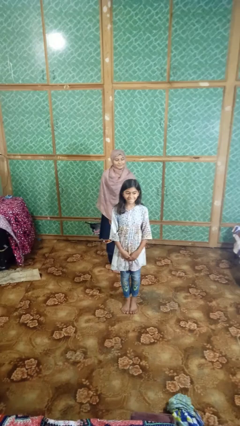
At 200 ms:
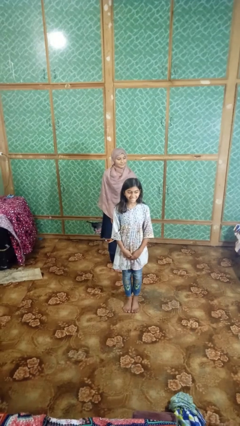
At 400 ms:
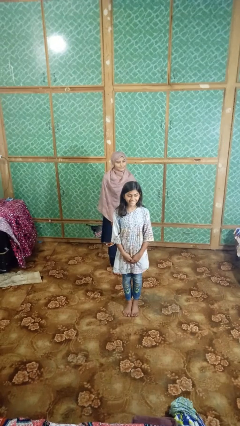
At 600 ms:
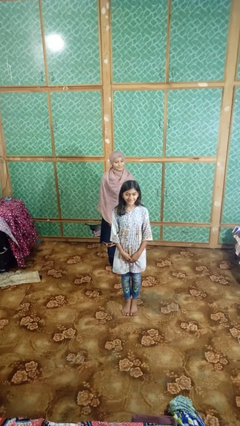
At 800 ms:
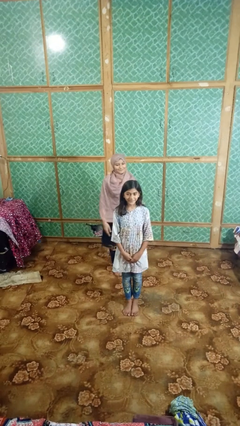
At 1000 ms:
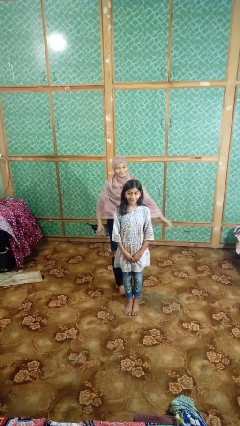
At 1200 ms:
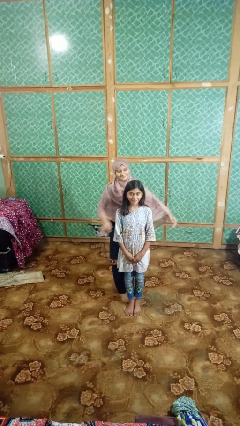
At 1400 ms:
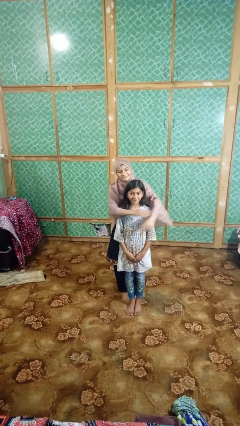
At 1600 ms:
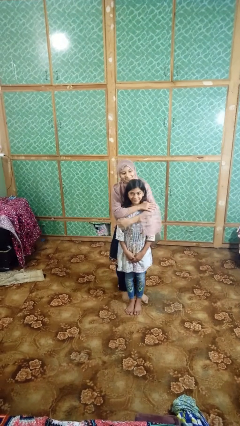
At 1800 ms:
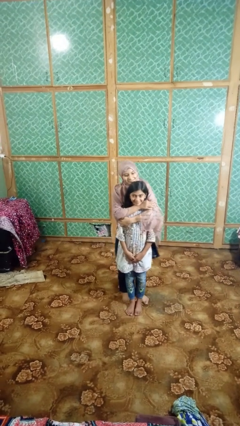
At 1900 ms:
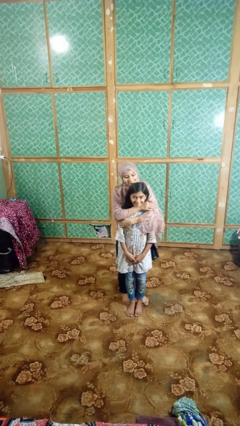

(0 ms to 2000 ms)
person hugs person from behind

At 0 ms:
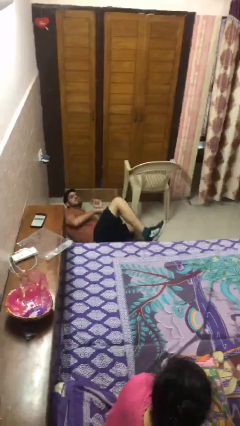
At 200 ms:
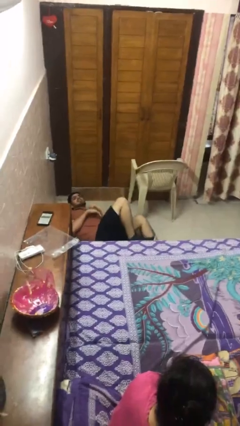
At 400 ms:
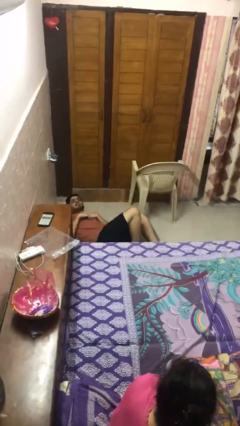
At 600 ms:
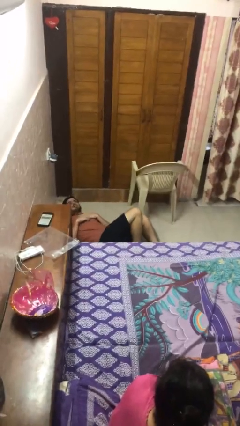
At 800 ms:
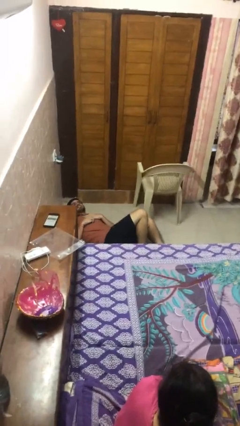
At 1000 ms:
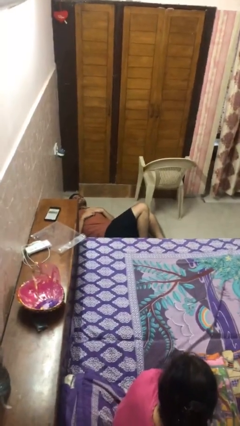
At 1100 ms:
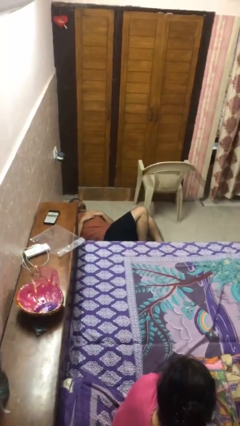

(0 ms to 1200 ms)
person lies down on floor

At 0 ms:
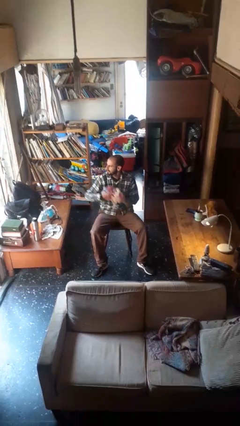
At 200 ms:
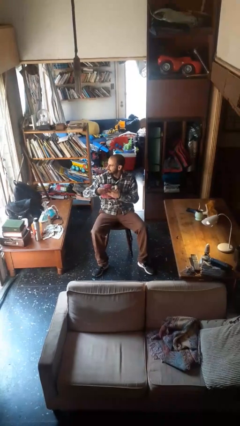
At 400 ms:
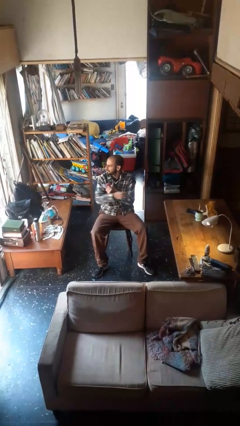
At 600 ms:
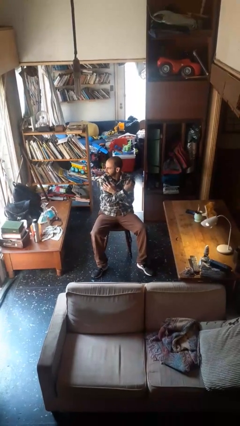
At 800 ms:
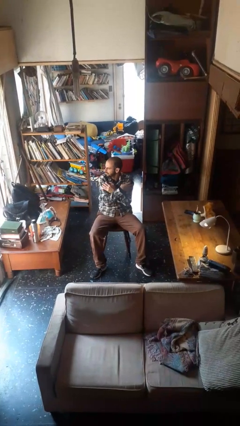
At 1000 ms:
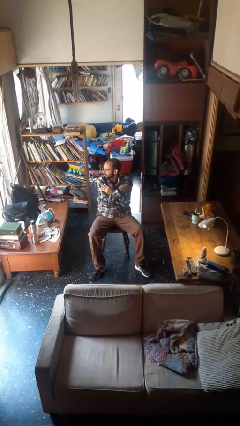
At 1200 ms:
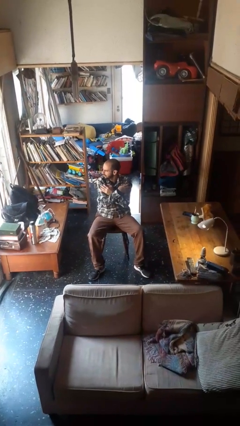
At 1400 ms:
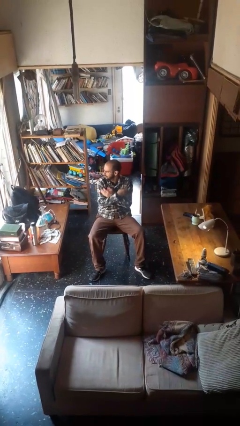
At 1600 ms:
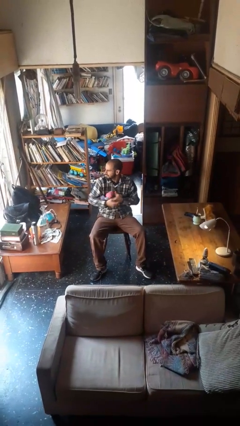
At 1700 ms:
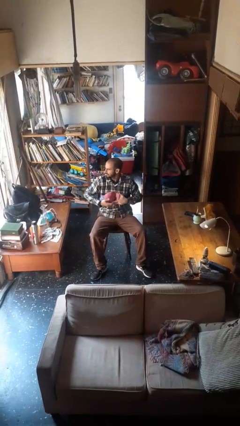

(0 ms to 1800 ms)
person squeezes object

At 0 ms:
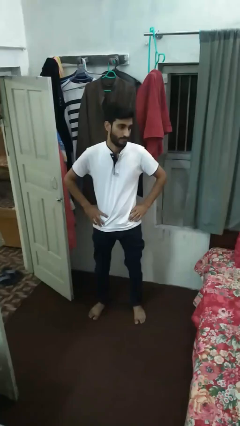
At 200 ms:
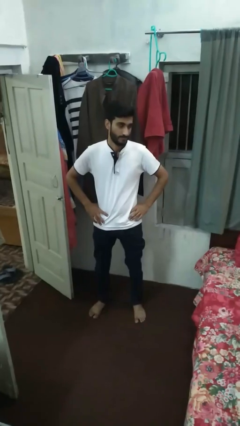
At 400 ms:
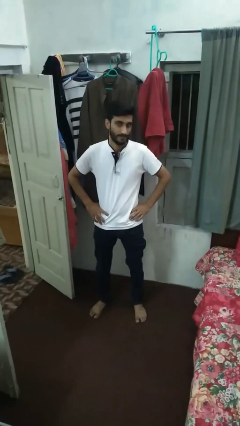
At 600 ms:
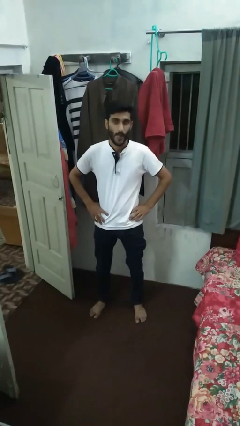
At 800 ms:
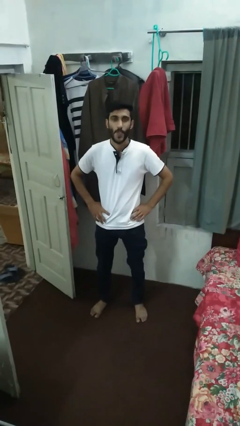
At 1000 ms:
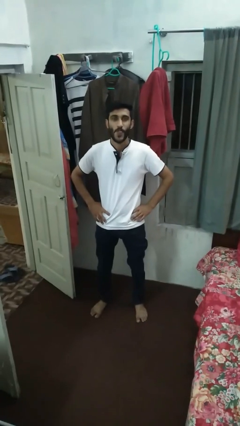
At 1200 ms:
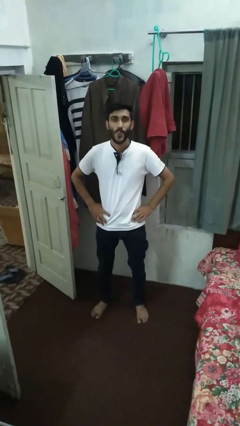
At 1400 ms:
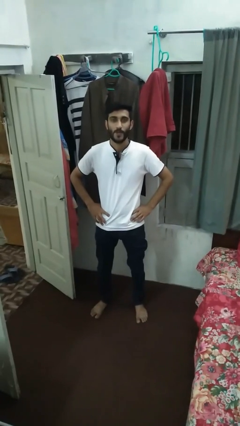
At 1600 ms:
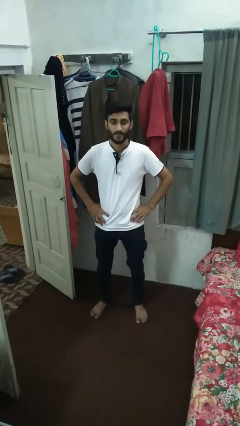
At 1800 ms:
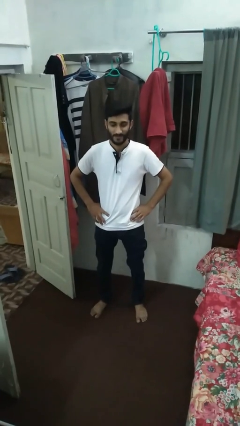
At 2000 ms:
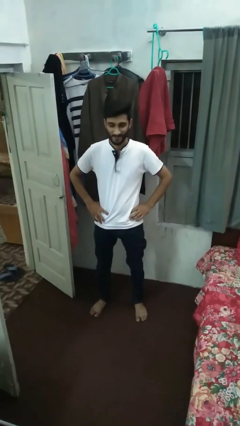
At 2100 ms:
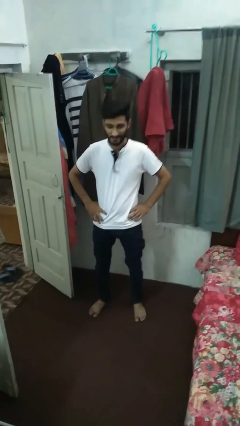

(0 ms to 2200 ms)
person sticks out tongue

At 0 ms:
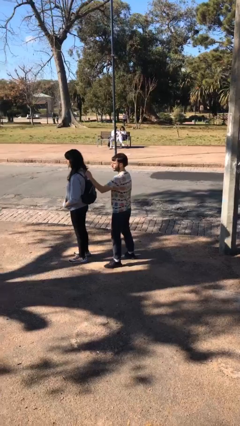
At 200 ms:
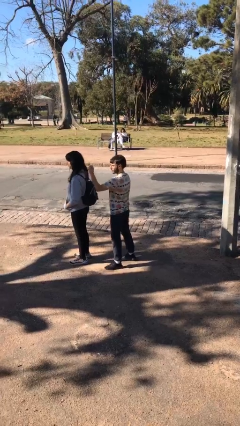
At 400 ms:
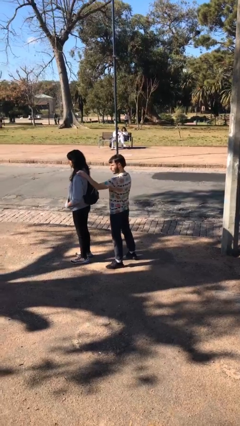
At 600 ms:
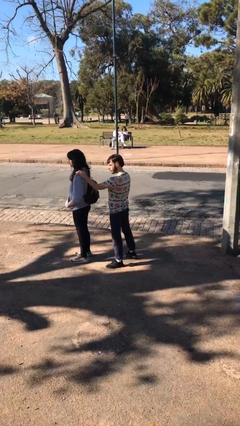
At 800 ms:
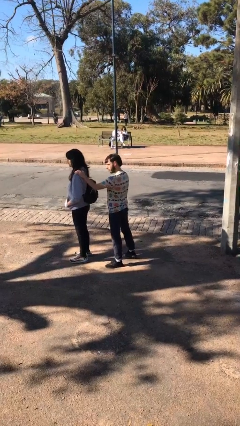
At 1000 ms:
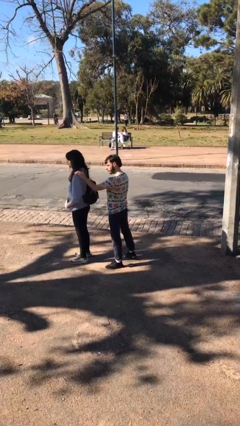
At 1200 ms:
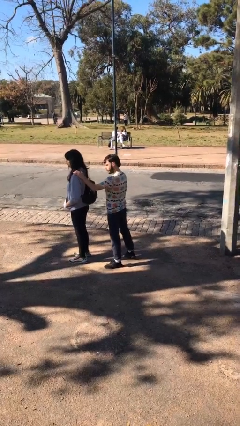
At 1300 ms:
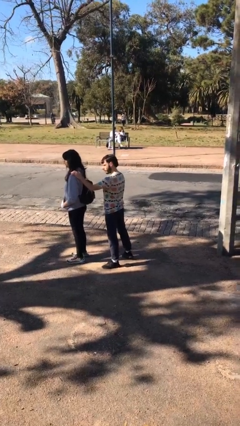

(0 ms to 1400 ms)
person grabs person by shoulder

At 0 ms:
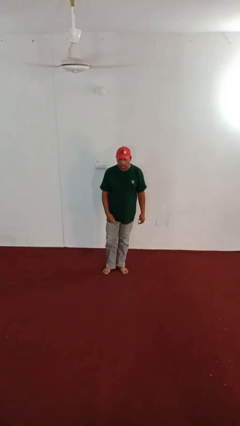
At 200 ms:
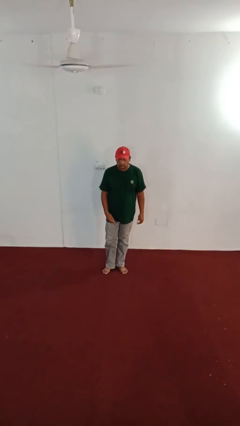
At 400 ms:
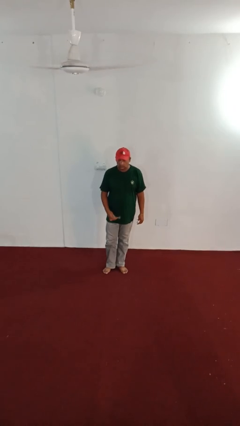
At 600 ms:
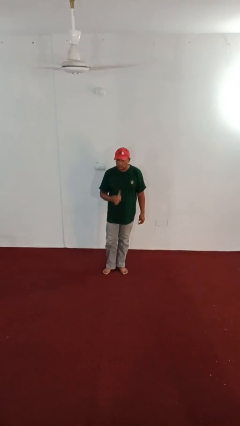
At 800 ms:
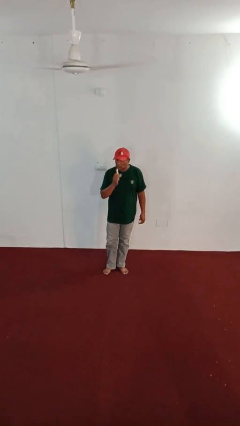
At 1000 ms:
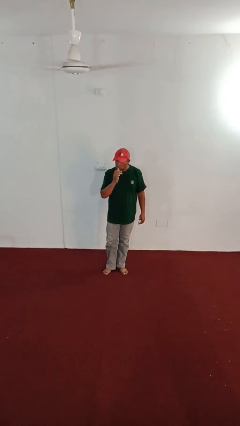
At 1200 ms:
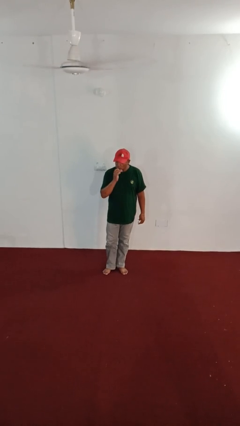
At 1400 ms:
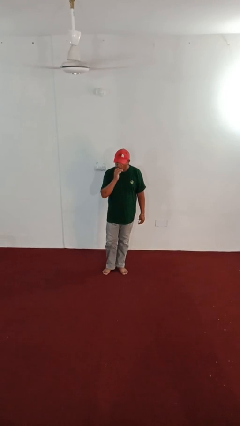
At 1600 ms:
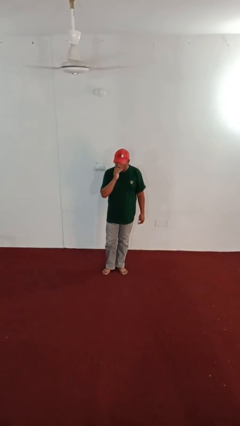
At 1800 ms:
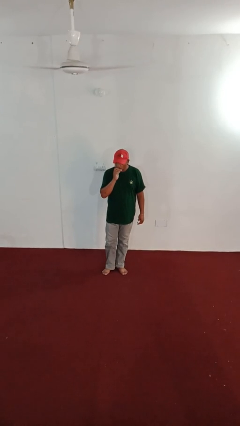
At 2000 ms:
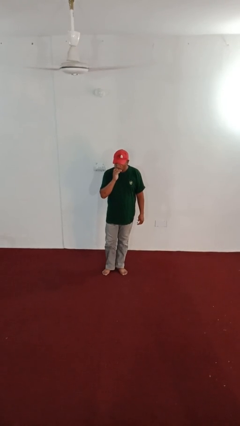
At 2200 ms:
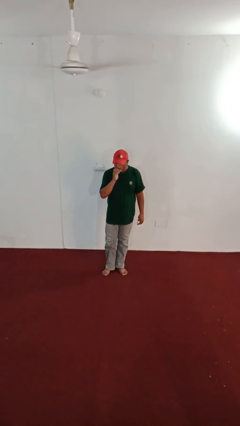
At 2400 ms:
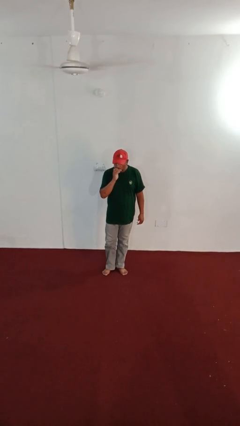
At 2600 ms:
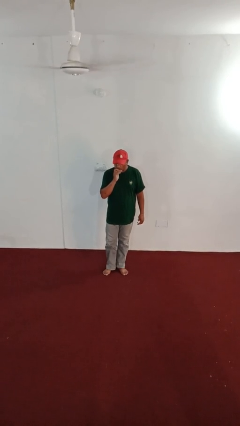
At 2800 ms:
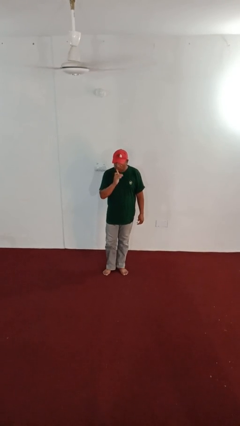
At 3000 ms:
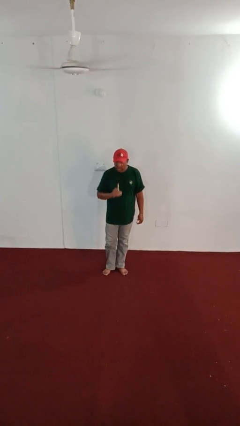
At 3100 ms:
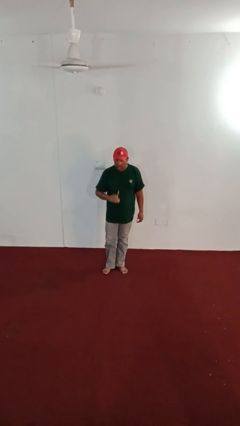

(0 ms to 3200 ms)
person brushes teeth

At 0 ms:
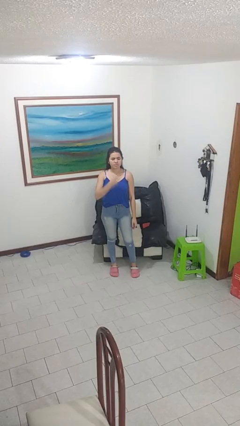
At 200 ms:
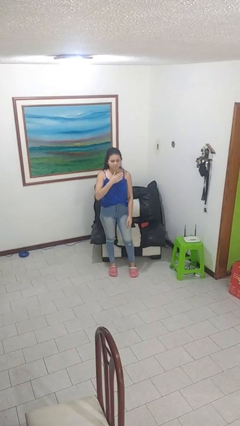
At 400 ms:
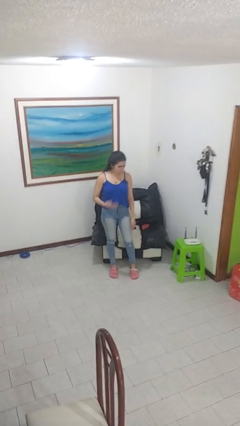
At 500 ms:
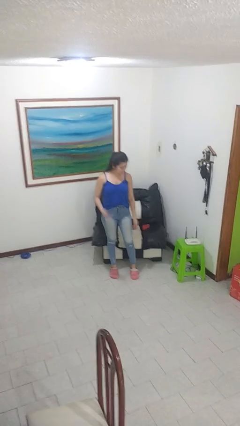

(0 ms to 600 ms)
person swats bug

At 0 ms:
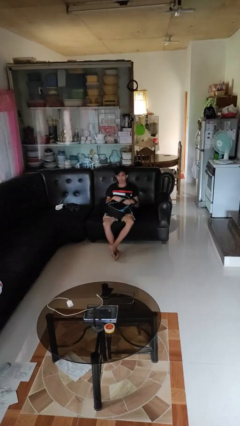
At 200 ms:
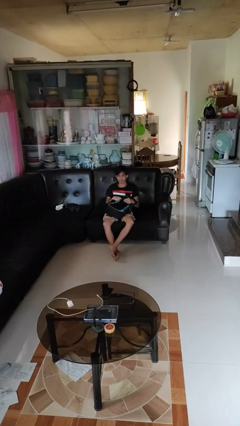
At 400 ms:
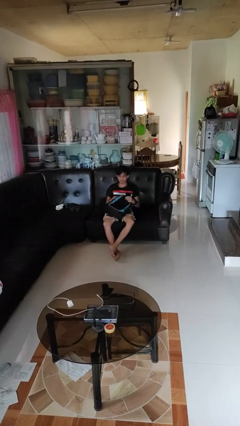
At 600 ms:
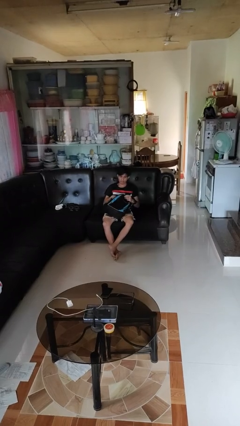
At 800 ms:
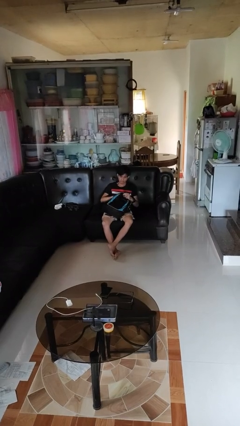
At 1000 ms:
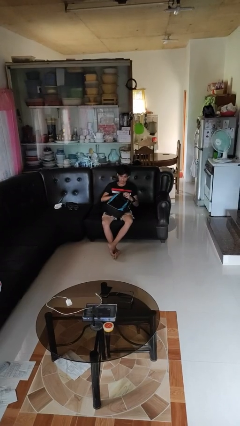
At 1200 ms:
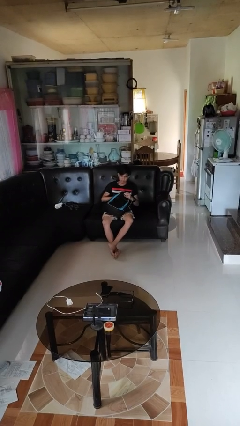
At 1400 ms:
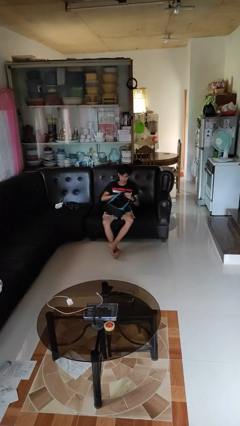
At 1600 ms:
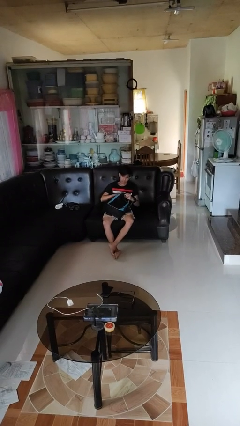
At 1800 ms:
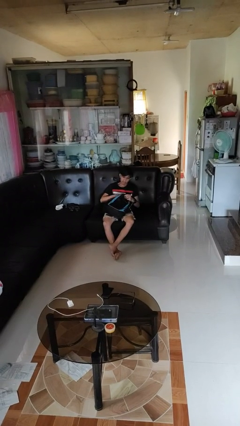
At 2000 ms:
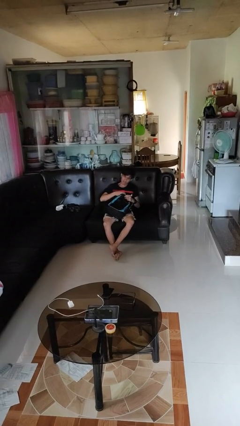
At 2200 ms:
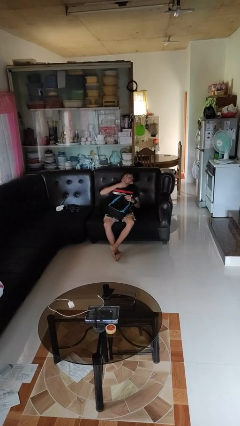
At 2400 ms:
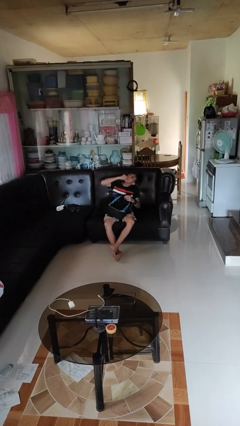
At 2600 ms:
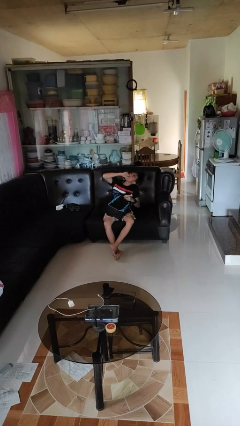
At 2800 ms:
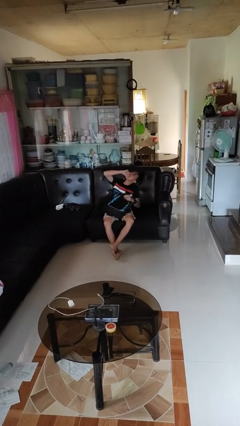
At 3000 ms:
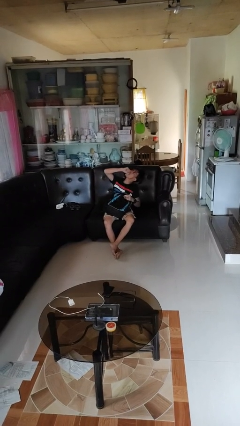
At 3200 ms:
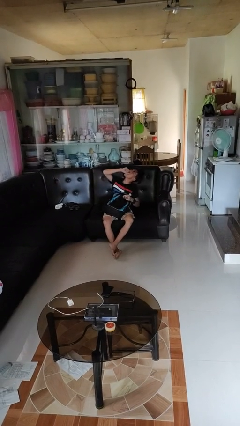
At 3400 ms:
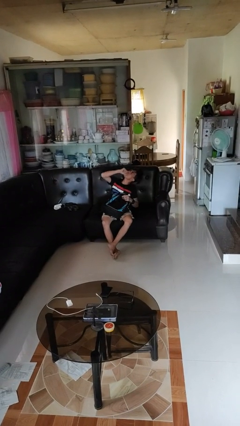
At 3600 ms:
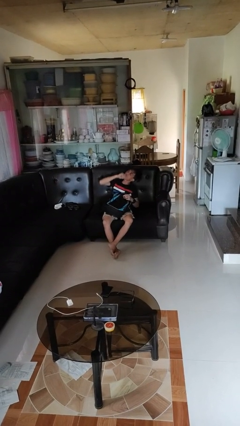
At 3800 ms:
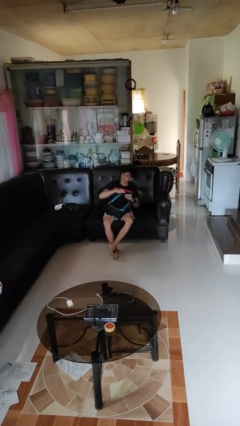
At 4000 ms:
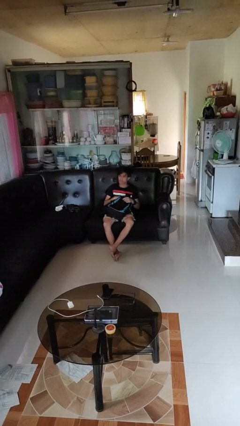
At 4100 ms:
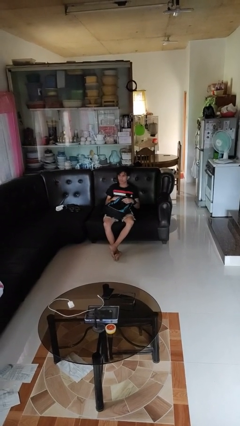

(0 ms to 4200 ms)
person eats snack from bag

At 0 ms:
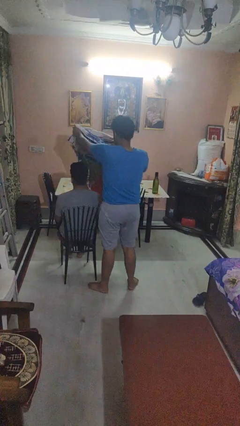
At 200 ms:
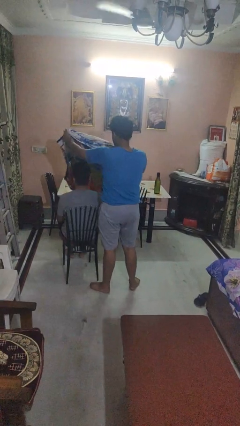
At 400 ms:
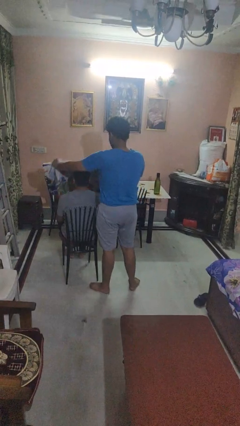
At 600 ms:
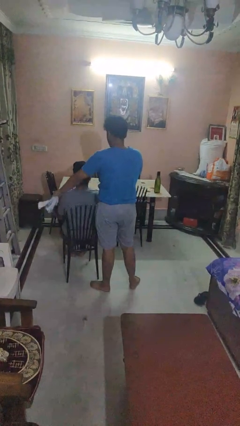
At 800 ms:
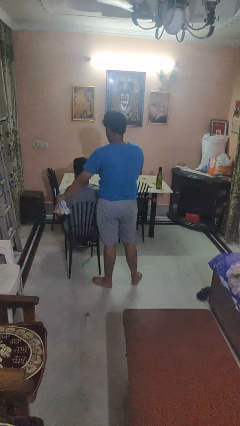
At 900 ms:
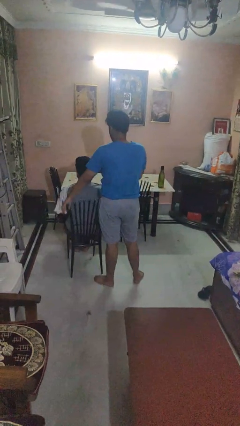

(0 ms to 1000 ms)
person covers friend with blanket
